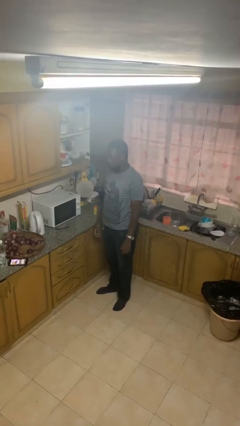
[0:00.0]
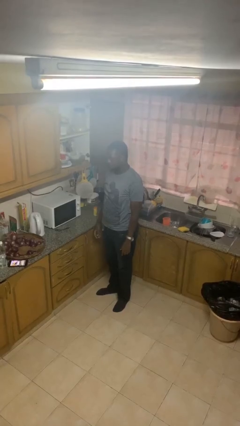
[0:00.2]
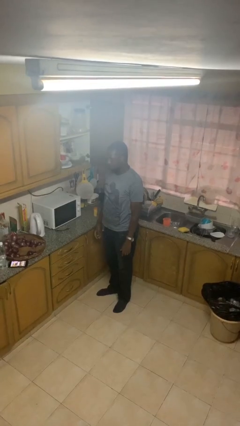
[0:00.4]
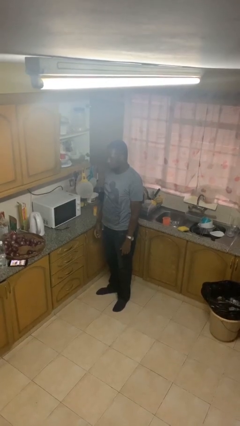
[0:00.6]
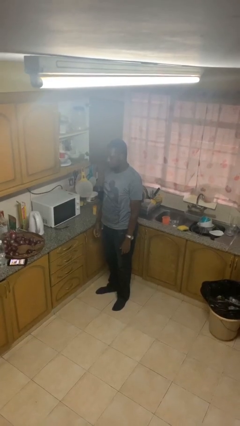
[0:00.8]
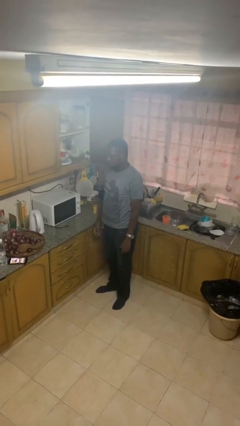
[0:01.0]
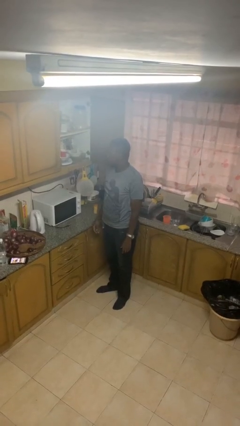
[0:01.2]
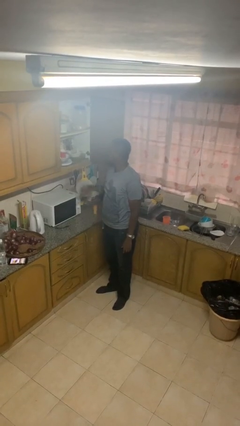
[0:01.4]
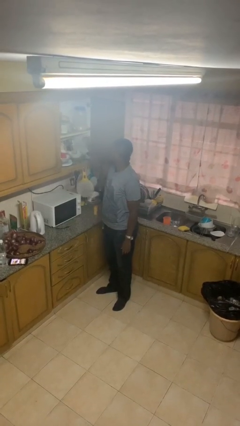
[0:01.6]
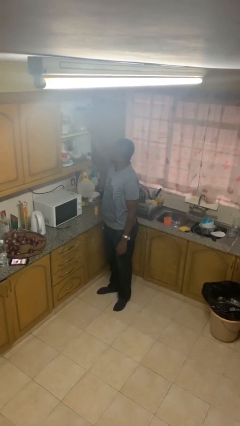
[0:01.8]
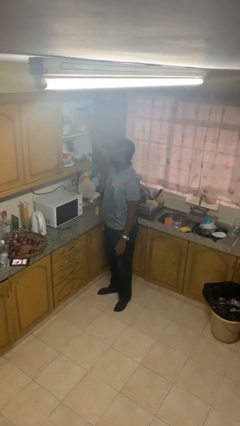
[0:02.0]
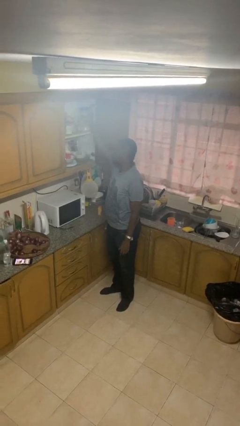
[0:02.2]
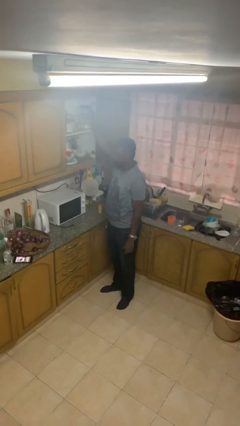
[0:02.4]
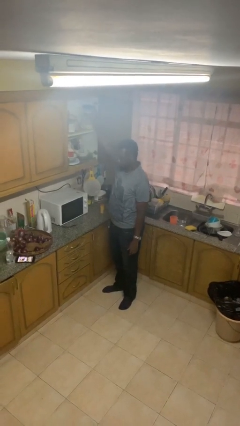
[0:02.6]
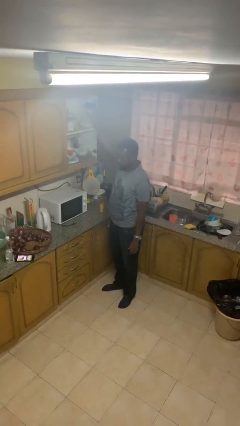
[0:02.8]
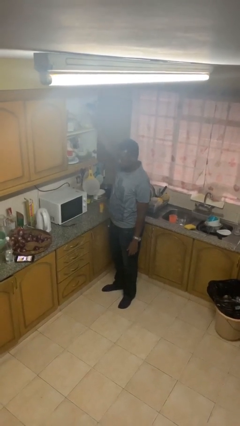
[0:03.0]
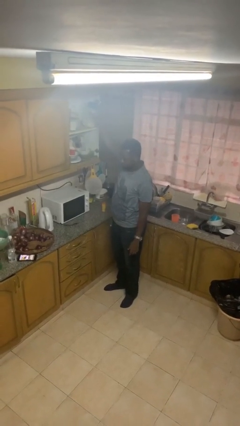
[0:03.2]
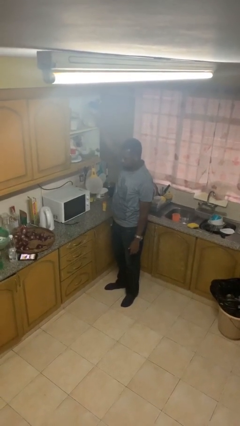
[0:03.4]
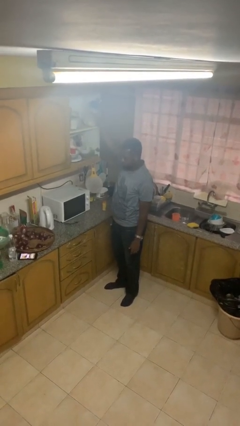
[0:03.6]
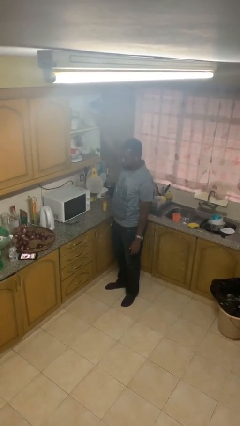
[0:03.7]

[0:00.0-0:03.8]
person picks up object from shelf

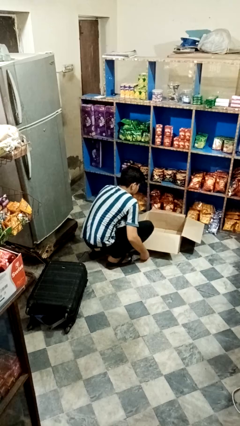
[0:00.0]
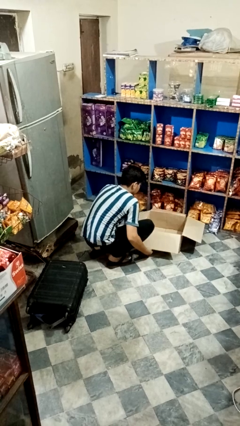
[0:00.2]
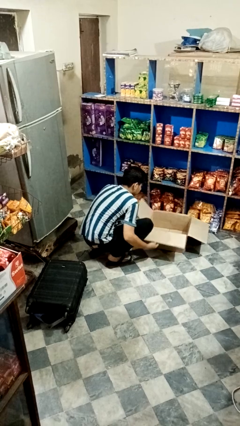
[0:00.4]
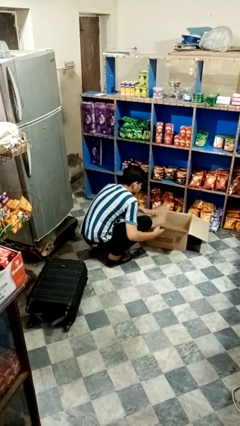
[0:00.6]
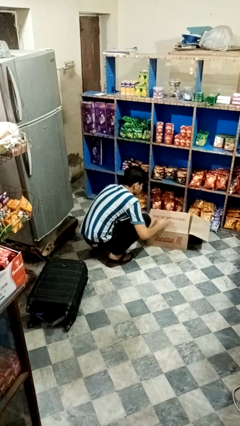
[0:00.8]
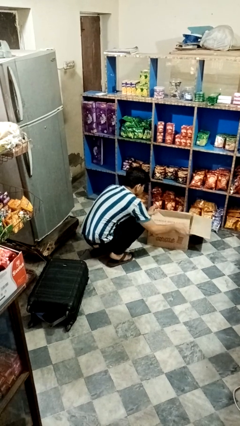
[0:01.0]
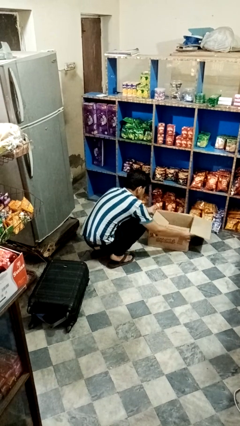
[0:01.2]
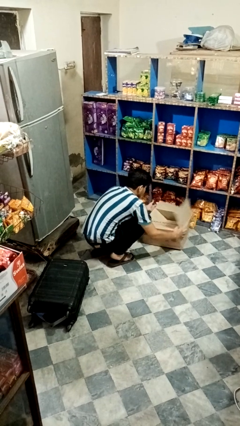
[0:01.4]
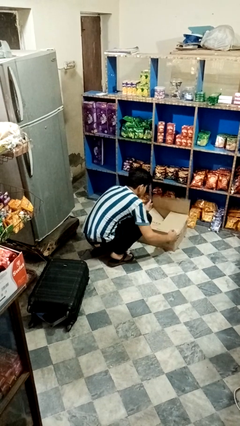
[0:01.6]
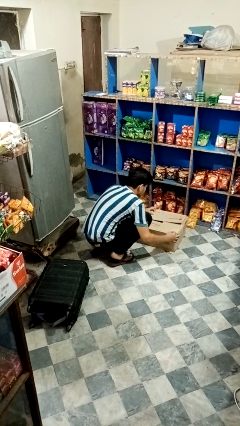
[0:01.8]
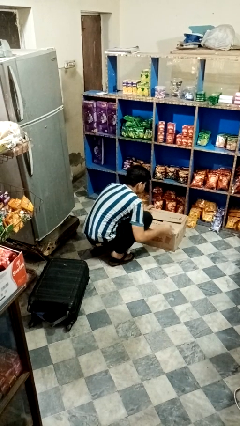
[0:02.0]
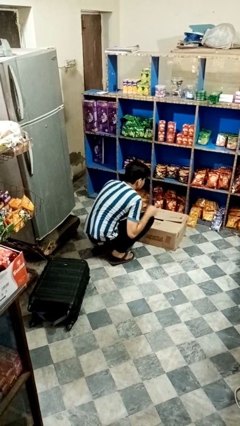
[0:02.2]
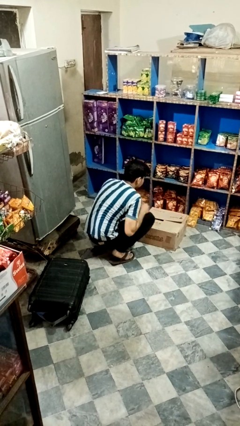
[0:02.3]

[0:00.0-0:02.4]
person closes box

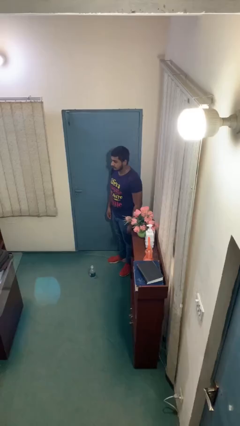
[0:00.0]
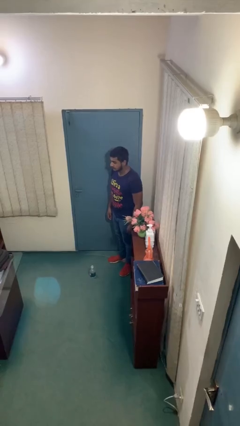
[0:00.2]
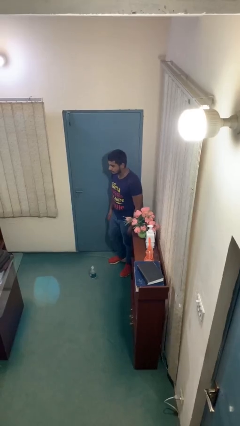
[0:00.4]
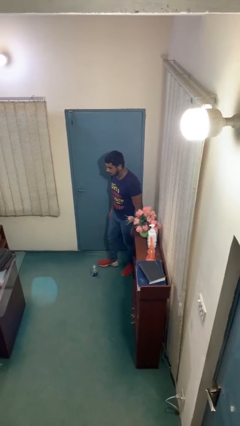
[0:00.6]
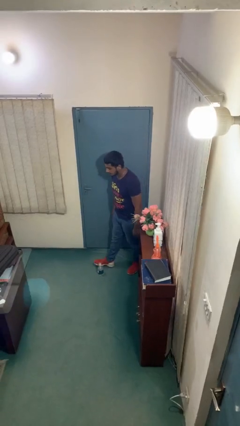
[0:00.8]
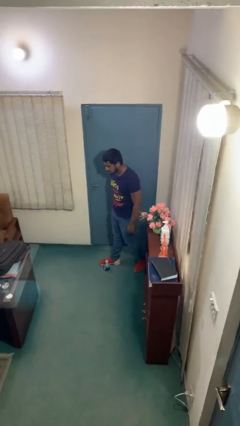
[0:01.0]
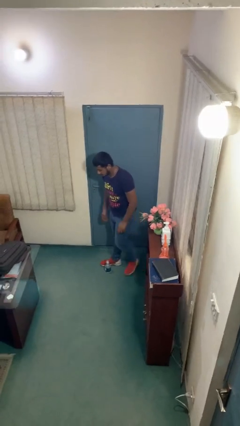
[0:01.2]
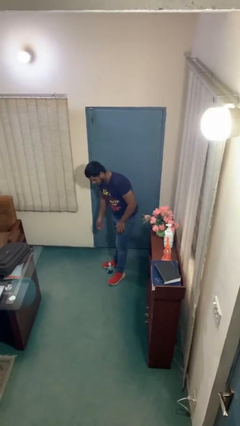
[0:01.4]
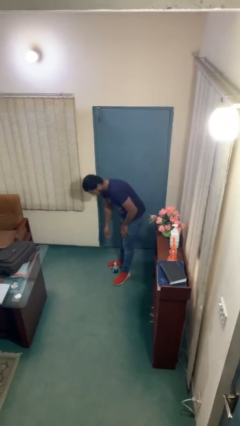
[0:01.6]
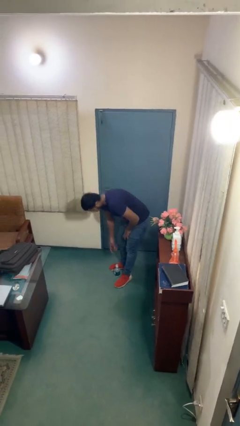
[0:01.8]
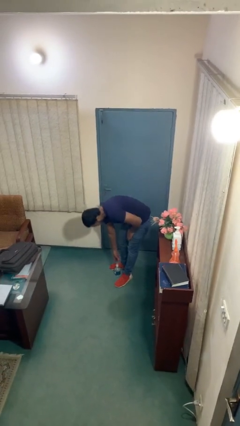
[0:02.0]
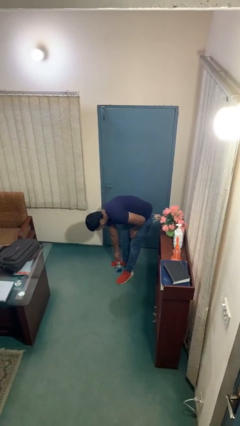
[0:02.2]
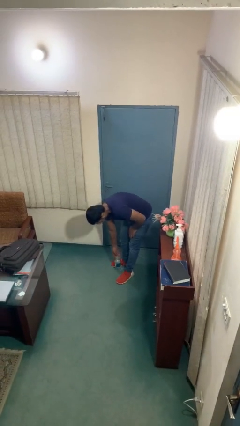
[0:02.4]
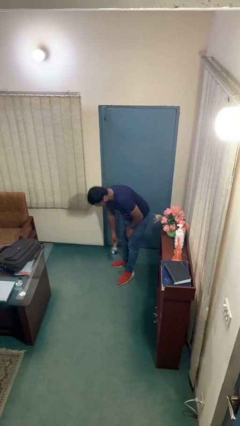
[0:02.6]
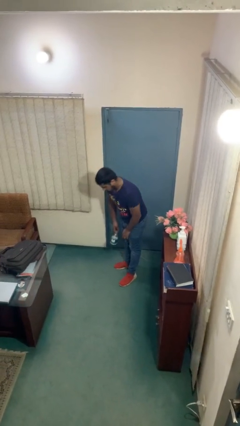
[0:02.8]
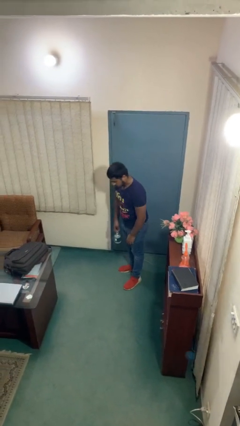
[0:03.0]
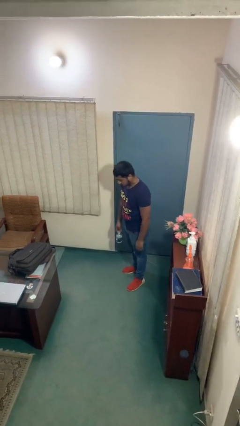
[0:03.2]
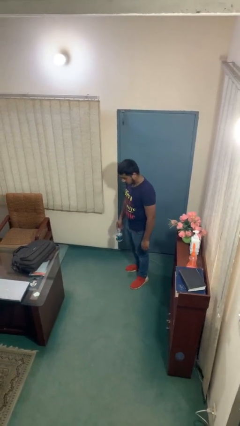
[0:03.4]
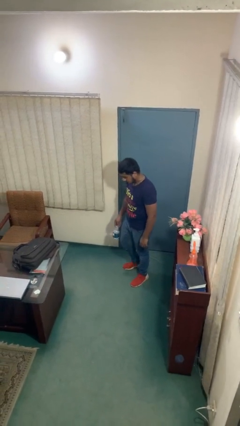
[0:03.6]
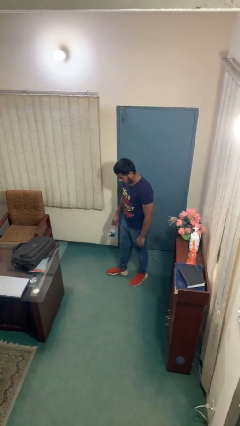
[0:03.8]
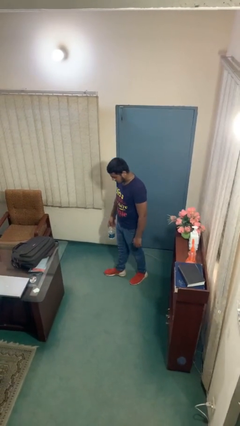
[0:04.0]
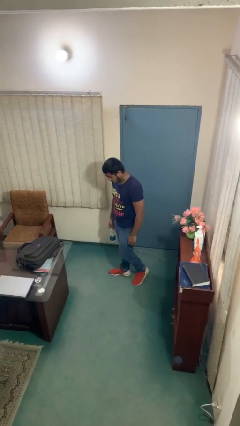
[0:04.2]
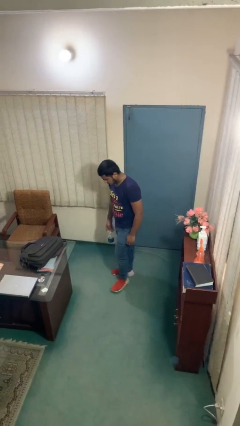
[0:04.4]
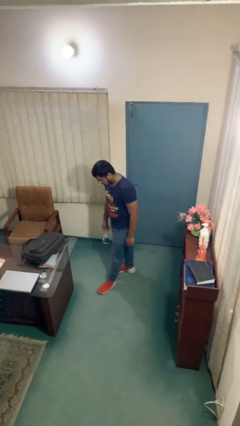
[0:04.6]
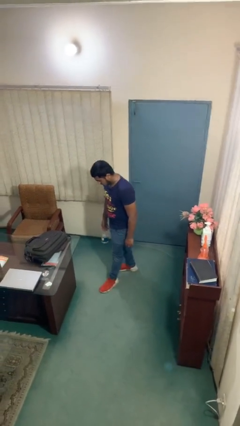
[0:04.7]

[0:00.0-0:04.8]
person picks up object from floor

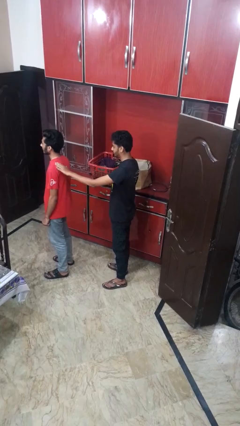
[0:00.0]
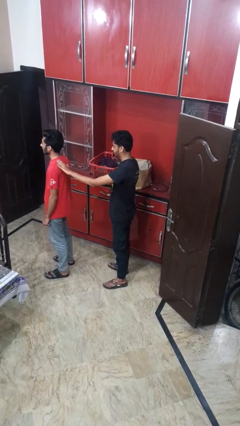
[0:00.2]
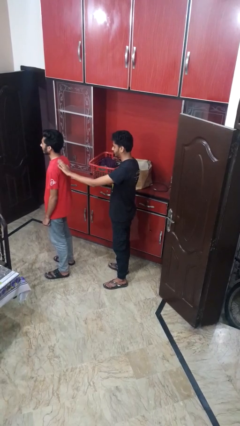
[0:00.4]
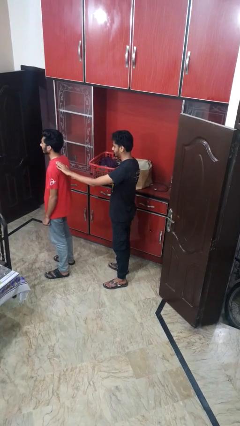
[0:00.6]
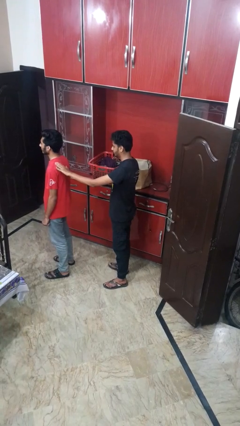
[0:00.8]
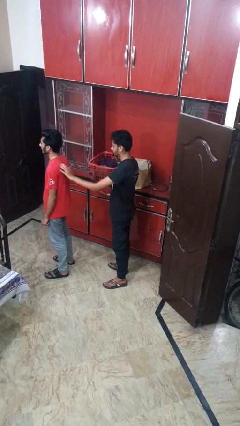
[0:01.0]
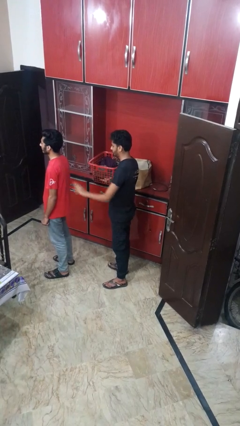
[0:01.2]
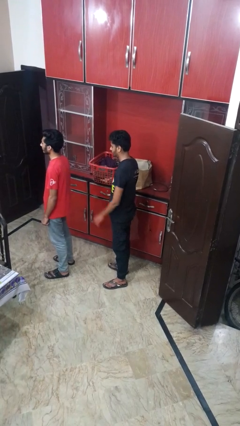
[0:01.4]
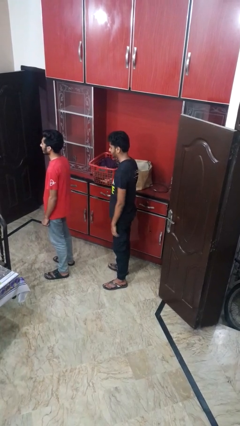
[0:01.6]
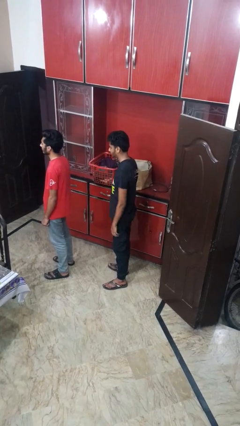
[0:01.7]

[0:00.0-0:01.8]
person gestures come here

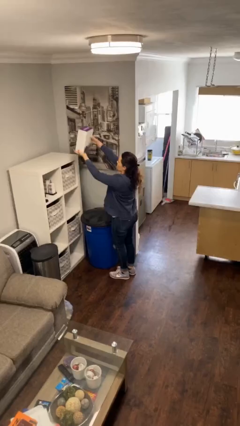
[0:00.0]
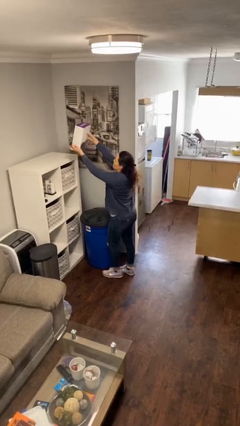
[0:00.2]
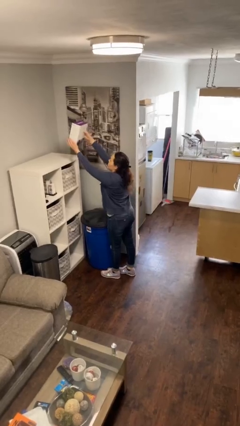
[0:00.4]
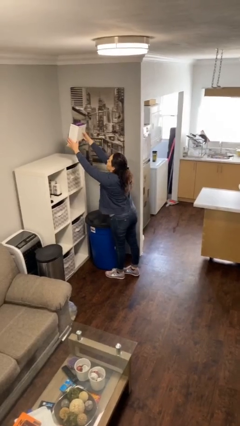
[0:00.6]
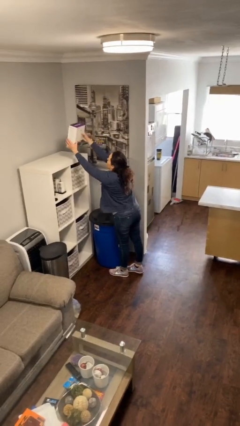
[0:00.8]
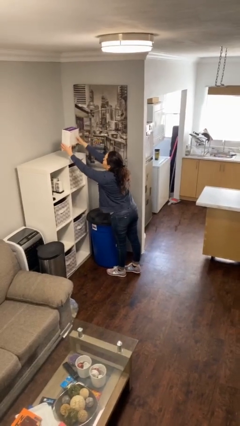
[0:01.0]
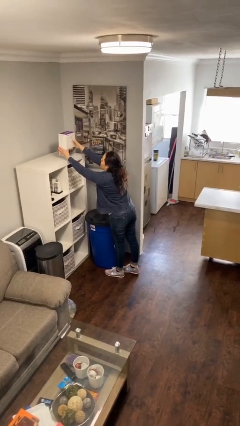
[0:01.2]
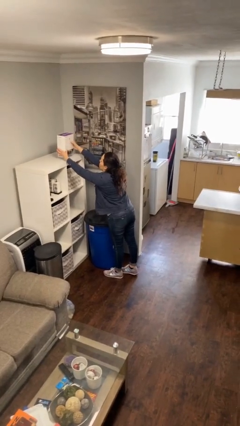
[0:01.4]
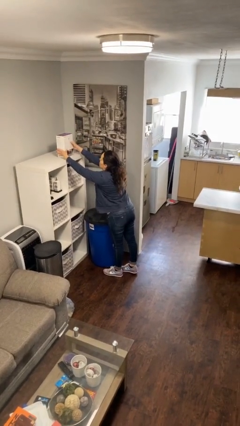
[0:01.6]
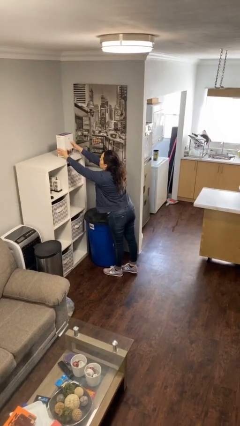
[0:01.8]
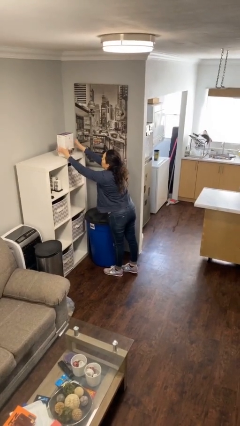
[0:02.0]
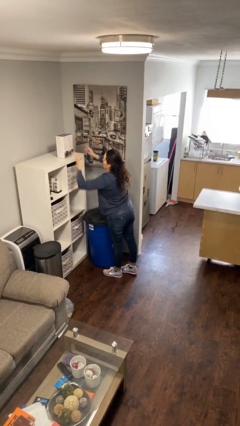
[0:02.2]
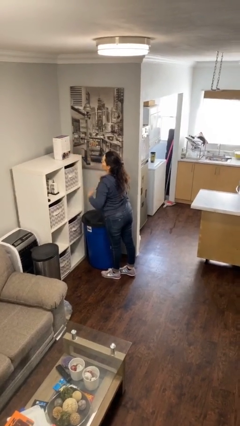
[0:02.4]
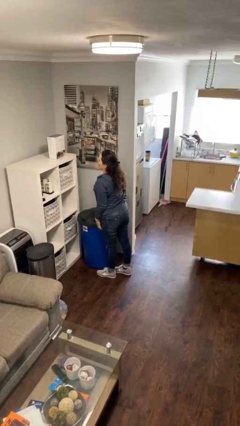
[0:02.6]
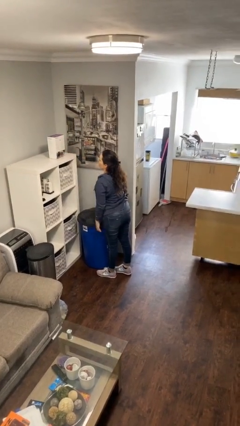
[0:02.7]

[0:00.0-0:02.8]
person puts down object on shelf

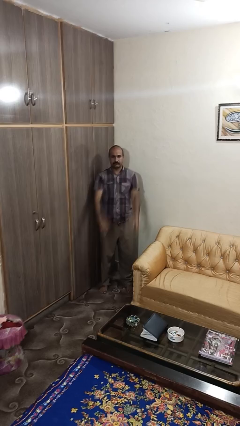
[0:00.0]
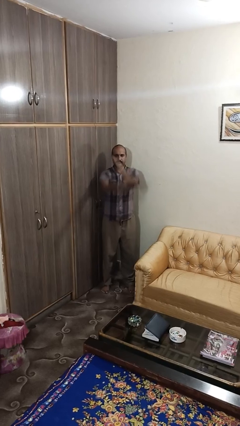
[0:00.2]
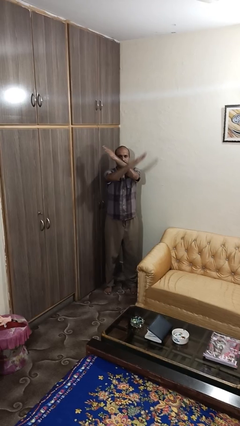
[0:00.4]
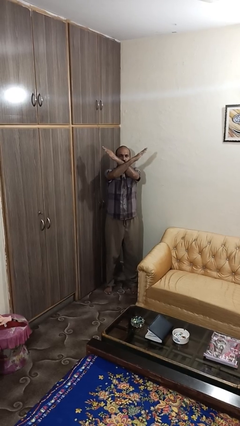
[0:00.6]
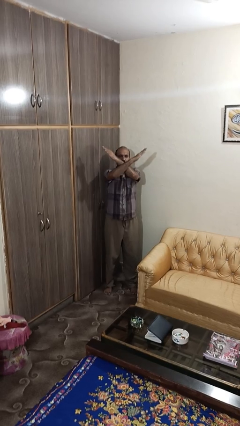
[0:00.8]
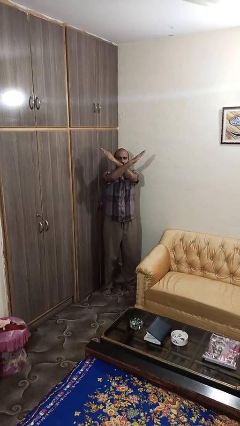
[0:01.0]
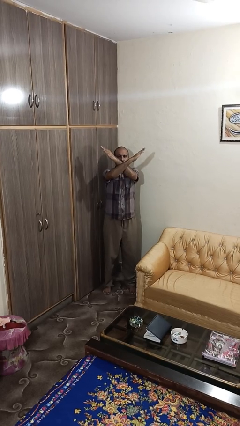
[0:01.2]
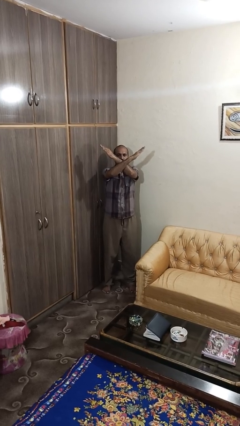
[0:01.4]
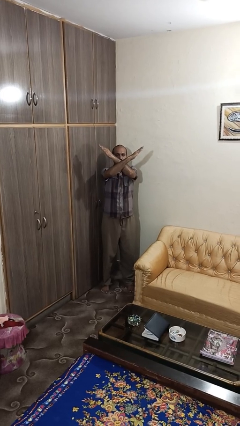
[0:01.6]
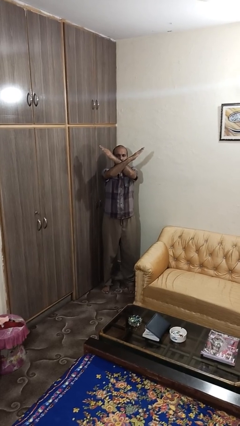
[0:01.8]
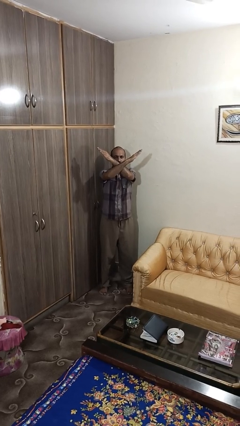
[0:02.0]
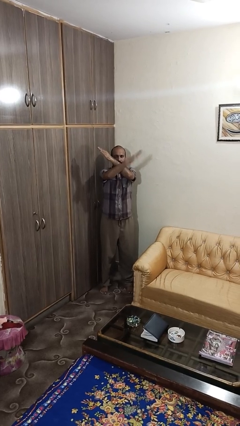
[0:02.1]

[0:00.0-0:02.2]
person gestures arms x
